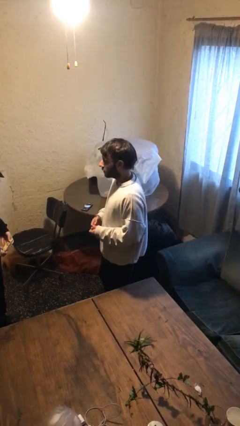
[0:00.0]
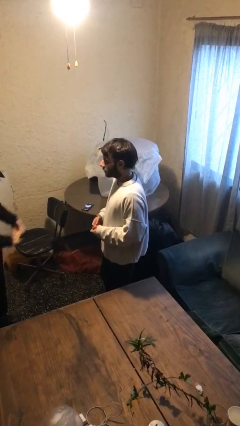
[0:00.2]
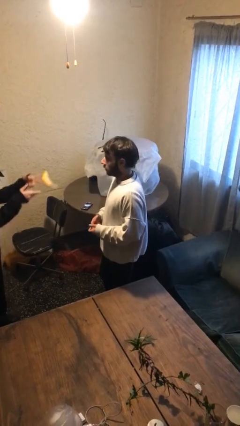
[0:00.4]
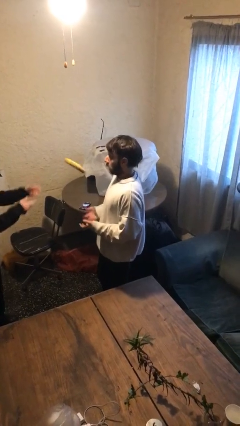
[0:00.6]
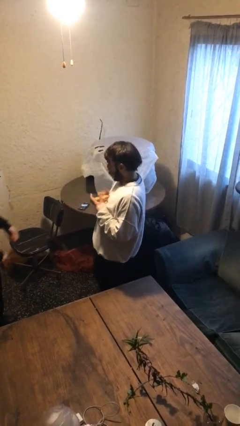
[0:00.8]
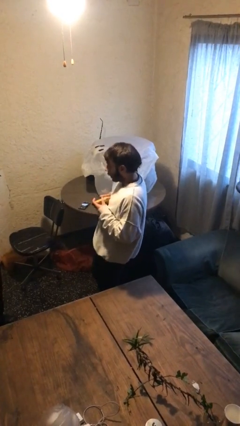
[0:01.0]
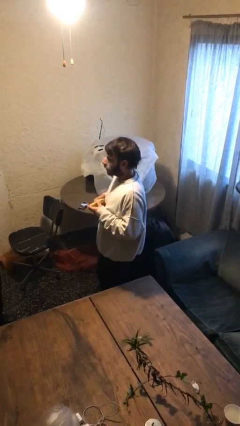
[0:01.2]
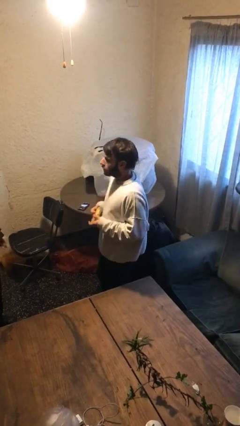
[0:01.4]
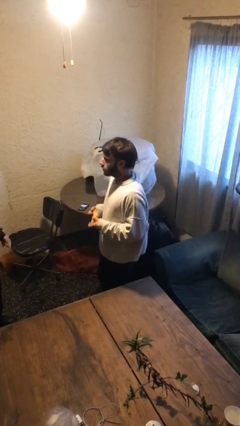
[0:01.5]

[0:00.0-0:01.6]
person catches object from person

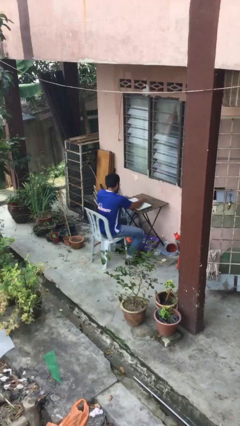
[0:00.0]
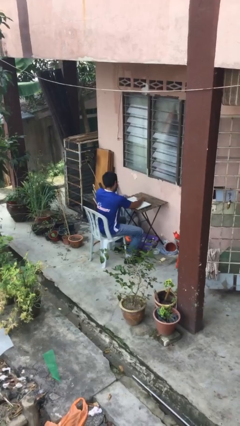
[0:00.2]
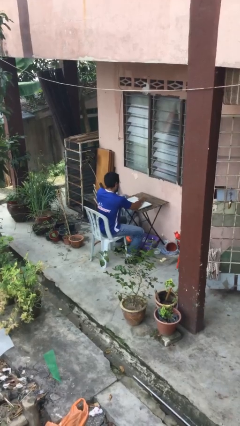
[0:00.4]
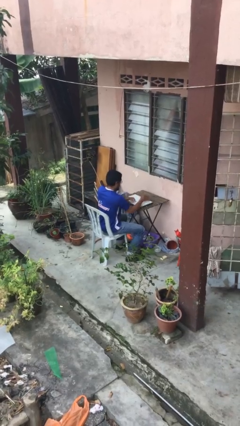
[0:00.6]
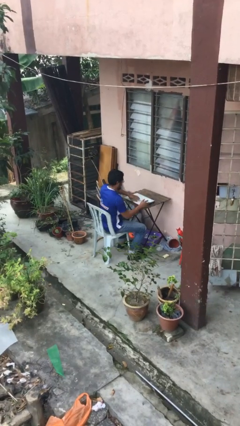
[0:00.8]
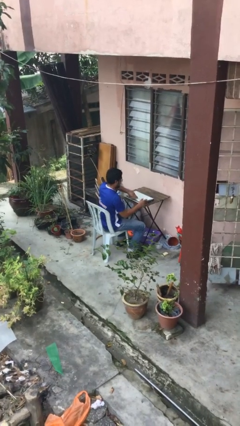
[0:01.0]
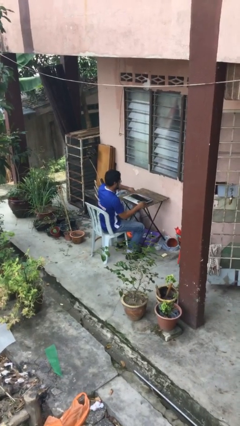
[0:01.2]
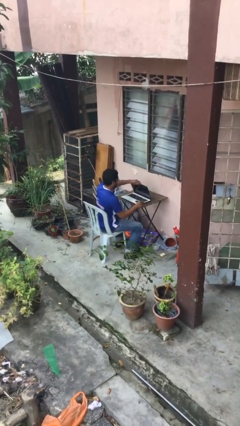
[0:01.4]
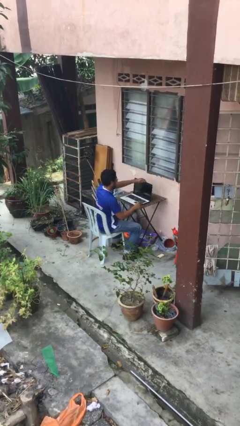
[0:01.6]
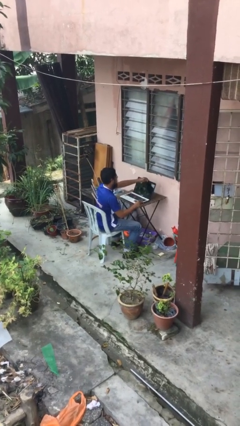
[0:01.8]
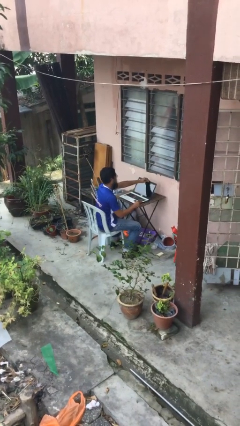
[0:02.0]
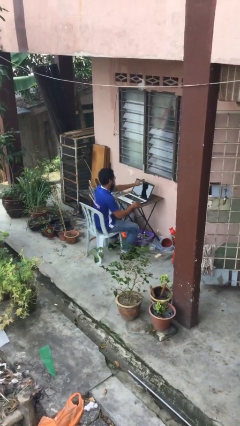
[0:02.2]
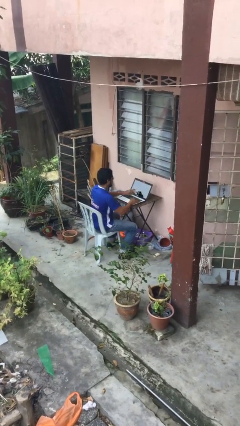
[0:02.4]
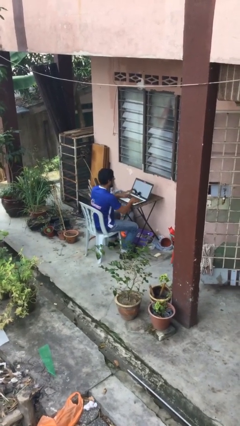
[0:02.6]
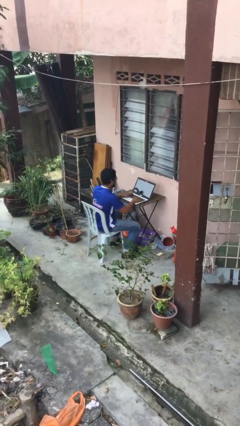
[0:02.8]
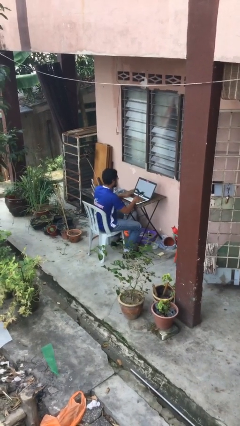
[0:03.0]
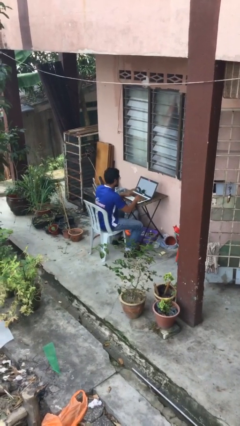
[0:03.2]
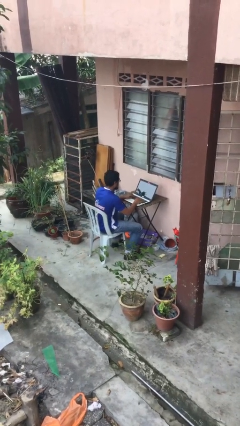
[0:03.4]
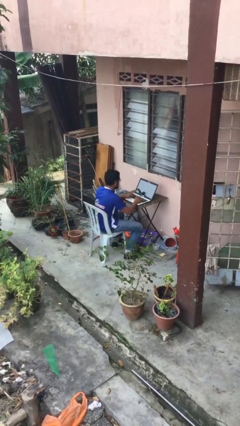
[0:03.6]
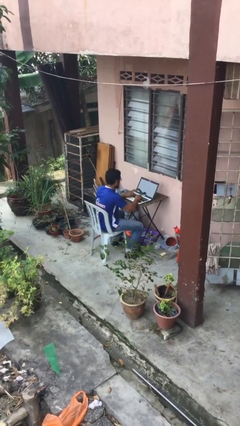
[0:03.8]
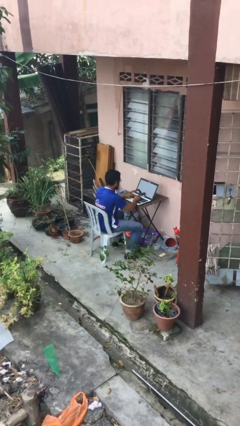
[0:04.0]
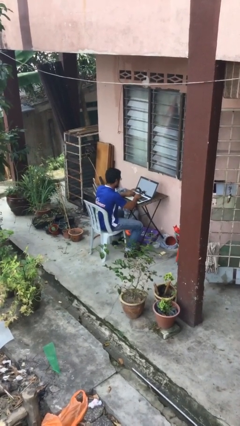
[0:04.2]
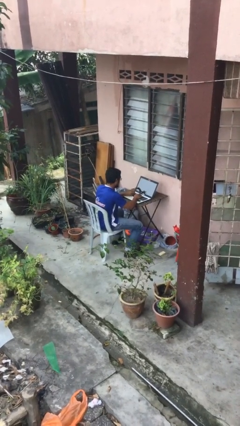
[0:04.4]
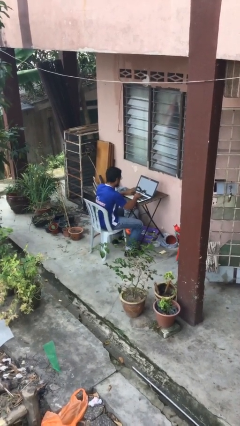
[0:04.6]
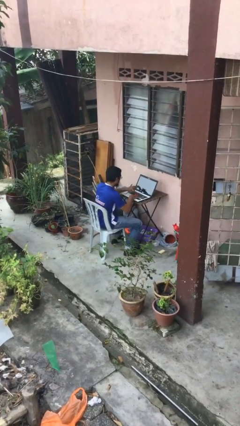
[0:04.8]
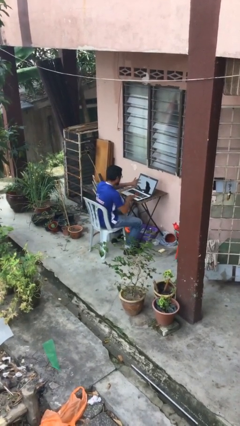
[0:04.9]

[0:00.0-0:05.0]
person interacts with laptop

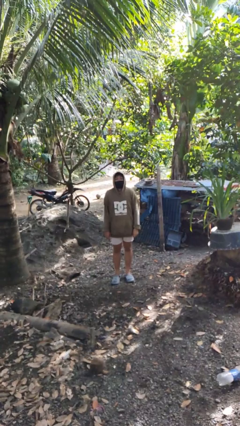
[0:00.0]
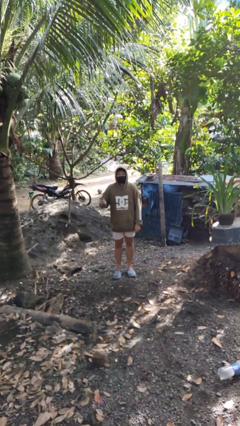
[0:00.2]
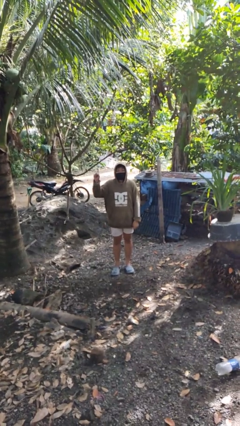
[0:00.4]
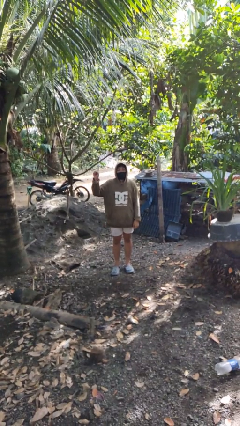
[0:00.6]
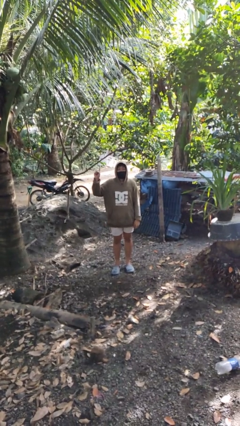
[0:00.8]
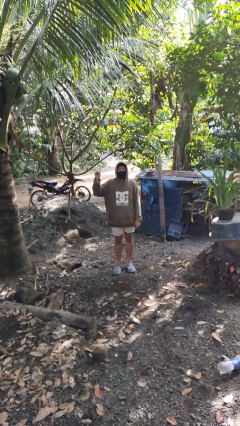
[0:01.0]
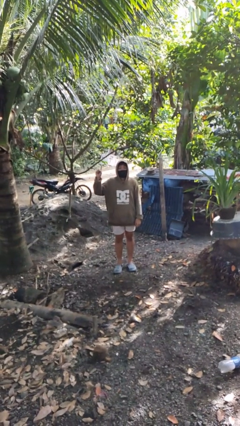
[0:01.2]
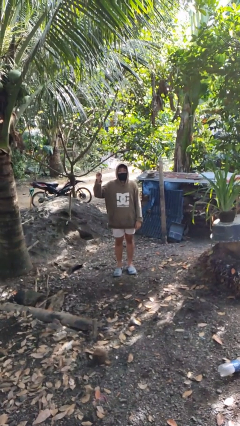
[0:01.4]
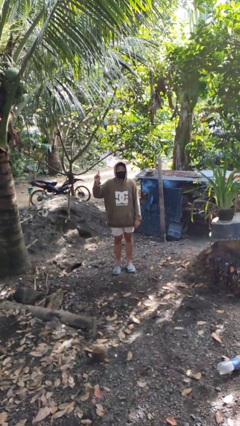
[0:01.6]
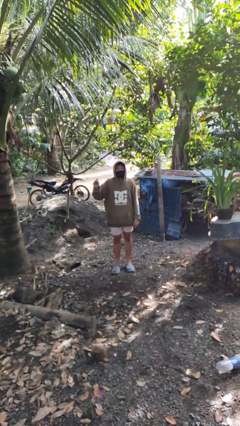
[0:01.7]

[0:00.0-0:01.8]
person gestures number one

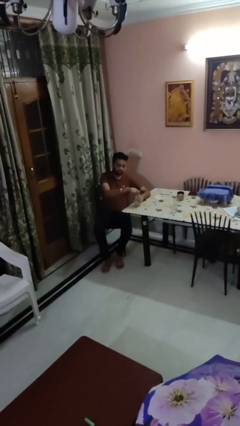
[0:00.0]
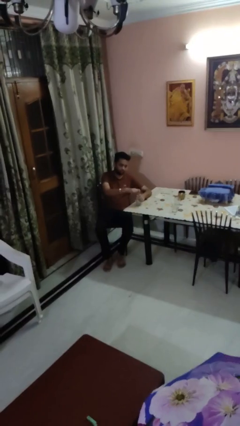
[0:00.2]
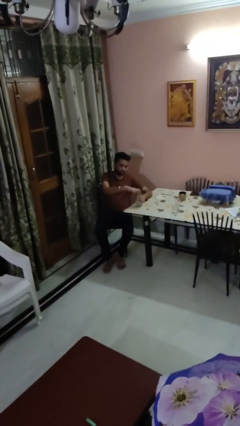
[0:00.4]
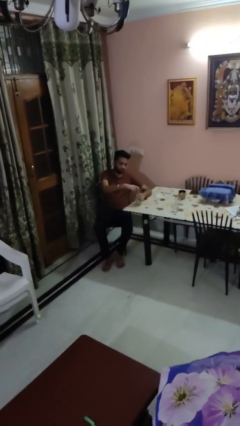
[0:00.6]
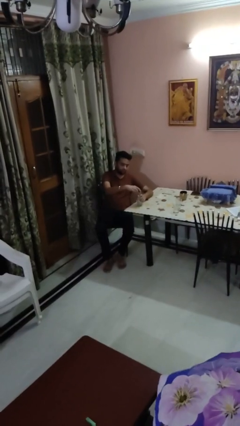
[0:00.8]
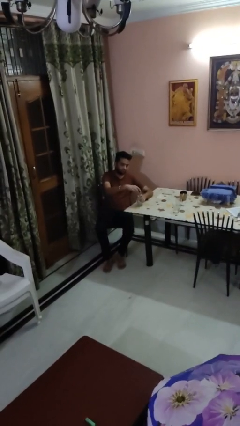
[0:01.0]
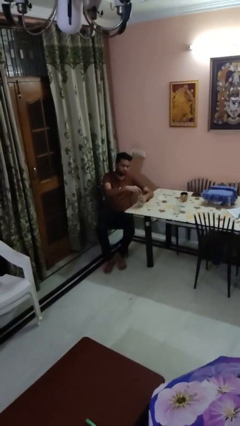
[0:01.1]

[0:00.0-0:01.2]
person unscrews lid from bottle

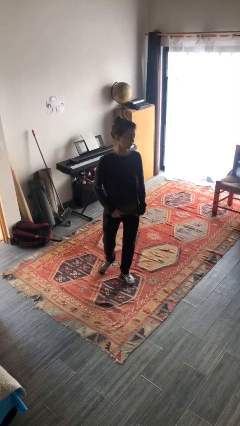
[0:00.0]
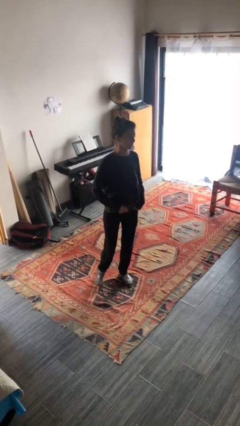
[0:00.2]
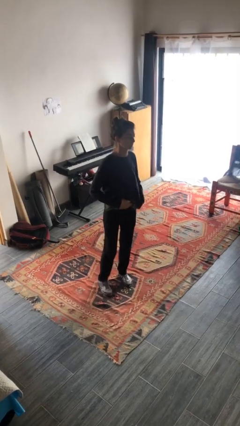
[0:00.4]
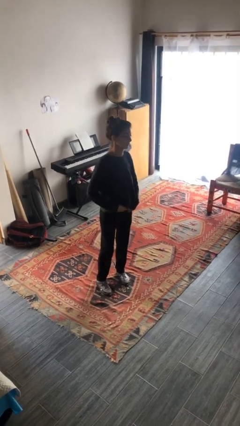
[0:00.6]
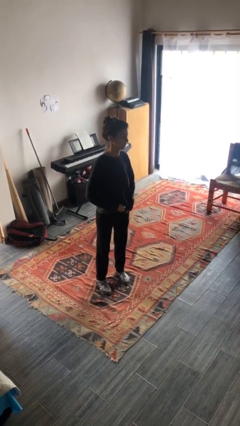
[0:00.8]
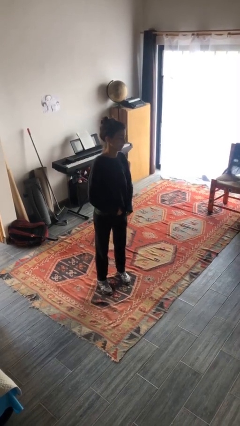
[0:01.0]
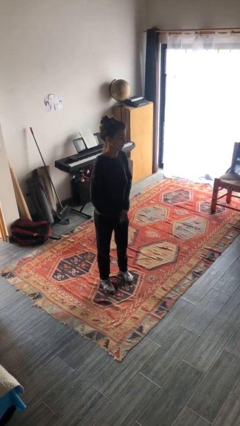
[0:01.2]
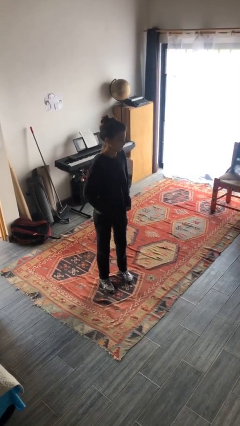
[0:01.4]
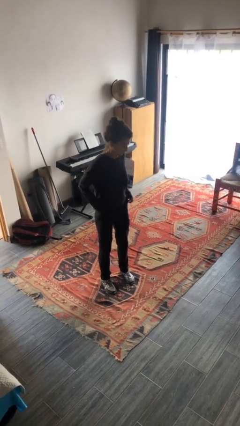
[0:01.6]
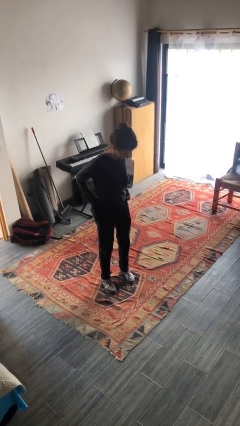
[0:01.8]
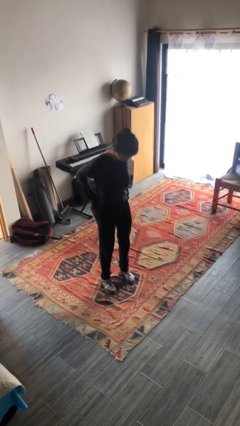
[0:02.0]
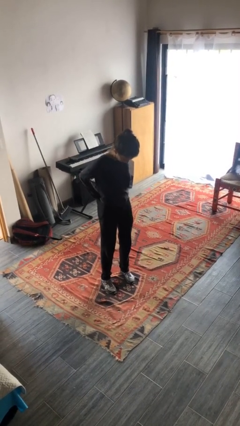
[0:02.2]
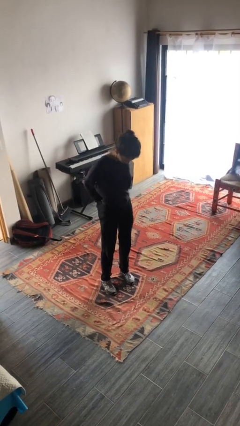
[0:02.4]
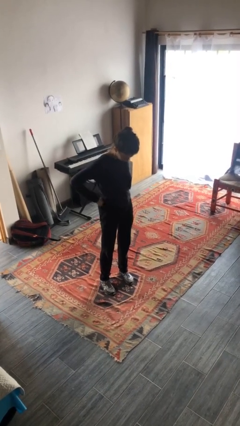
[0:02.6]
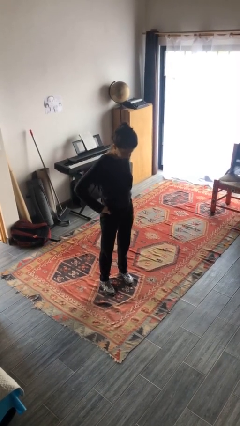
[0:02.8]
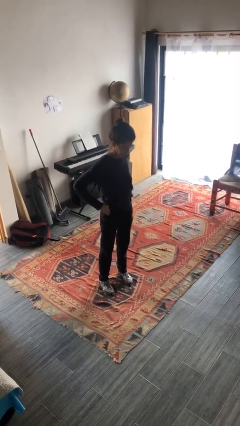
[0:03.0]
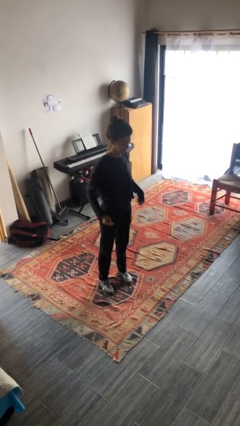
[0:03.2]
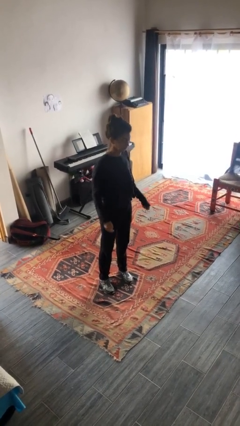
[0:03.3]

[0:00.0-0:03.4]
person tucks in shirt

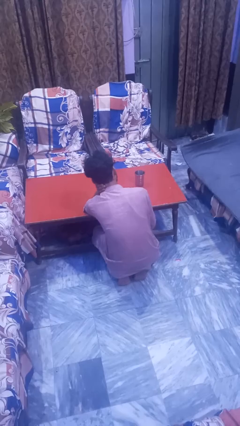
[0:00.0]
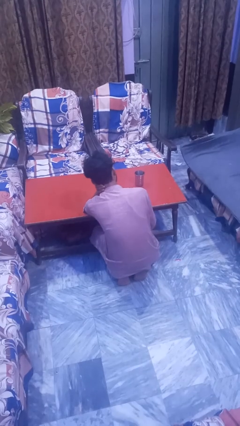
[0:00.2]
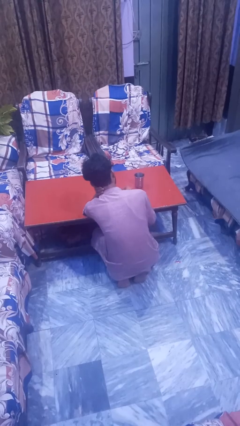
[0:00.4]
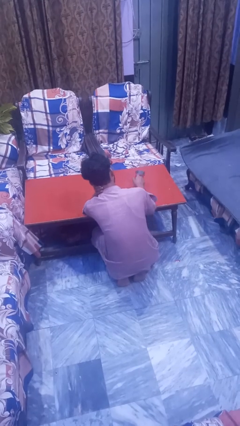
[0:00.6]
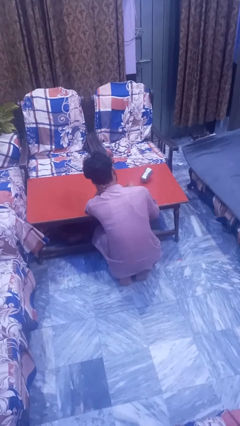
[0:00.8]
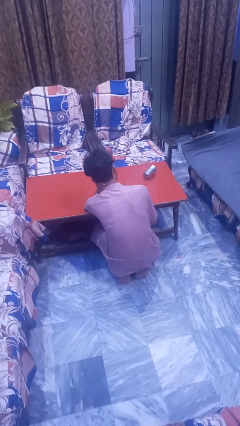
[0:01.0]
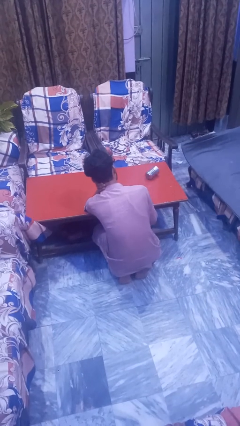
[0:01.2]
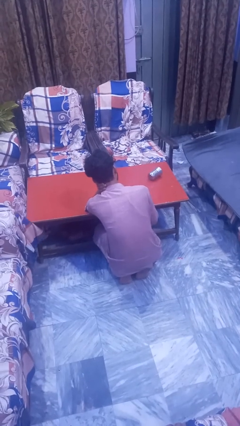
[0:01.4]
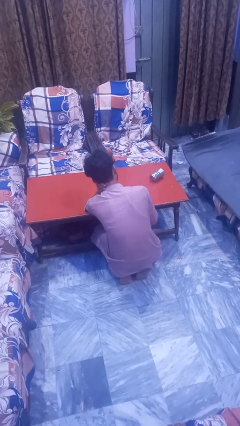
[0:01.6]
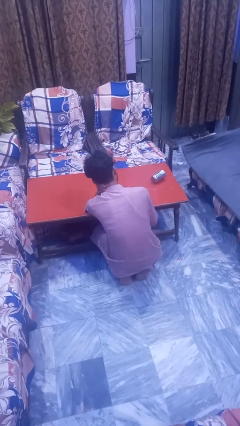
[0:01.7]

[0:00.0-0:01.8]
person knocks over glass

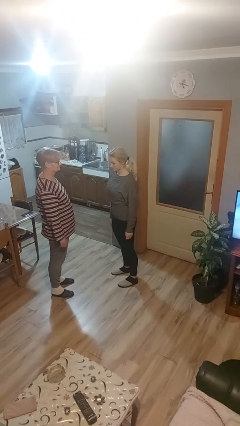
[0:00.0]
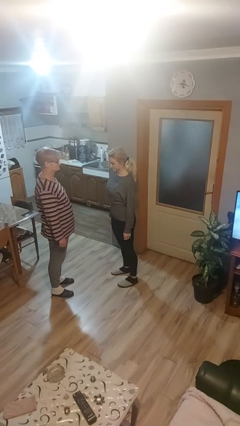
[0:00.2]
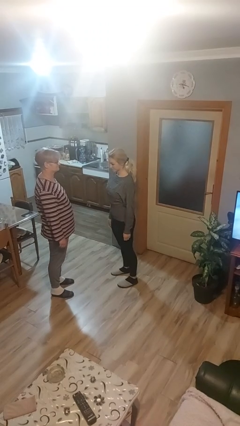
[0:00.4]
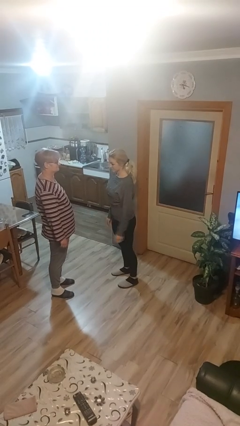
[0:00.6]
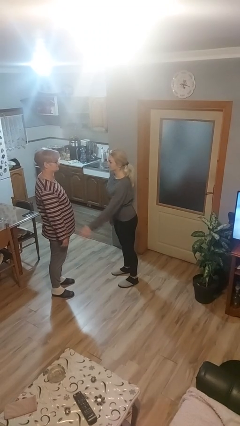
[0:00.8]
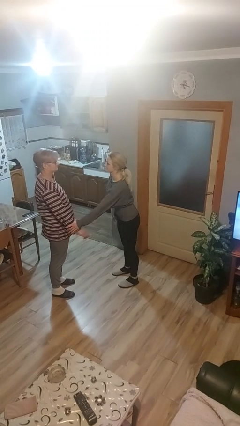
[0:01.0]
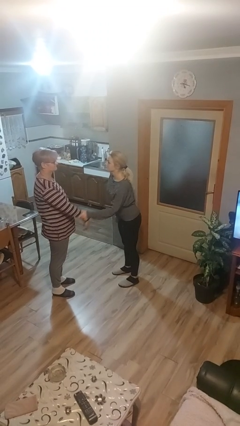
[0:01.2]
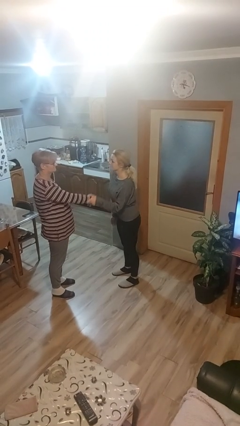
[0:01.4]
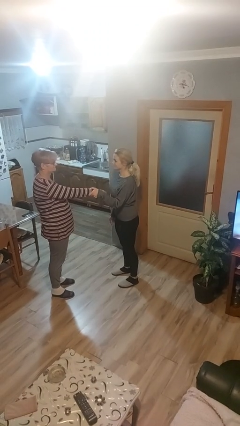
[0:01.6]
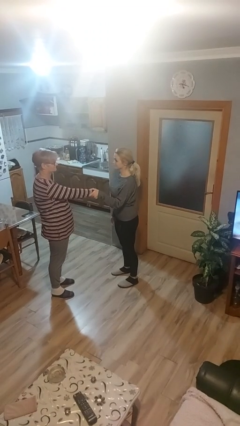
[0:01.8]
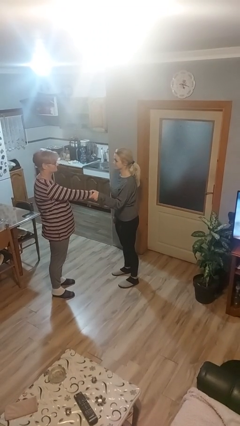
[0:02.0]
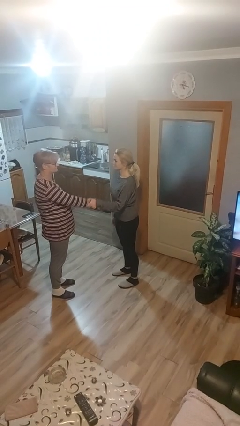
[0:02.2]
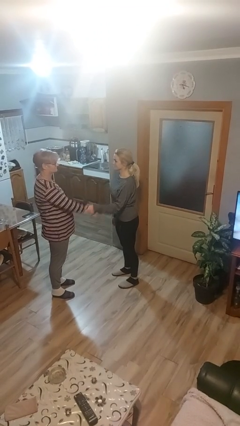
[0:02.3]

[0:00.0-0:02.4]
person grabs person by forearm
